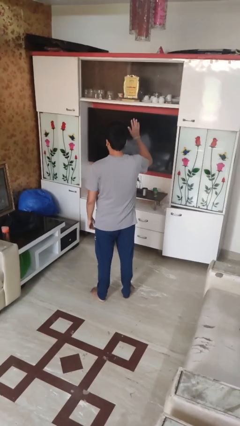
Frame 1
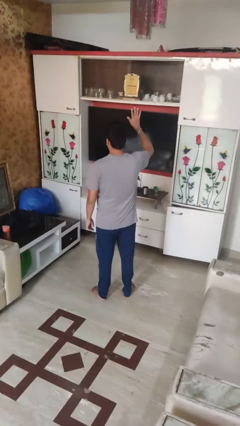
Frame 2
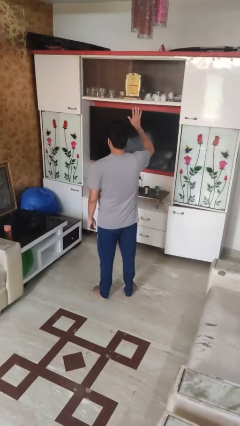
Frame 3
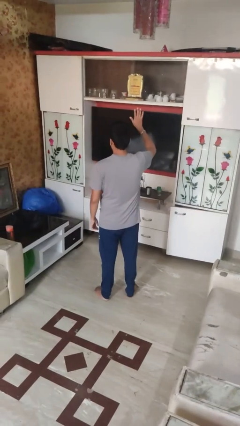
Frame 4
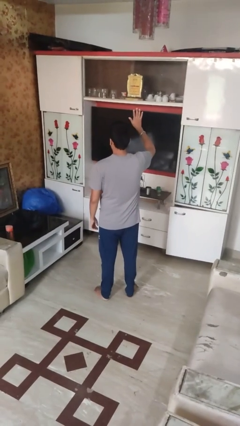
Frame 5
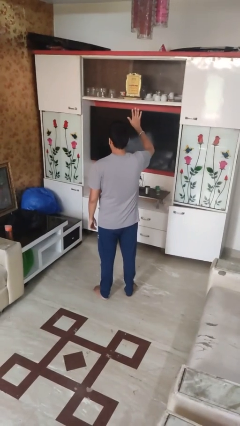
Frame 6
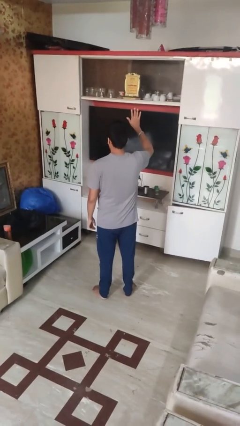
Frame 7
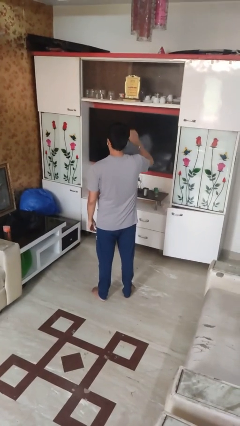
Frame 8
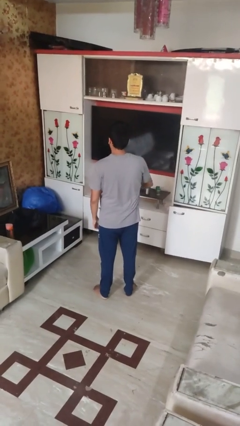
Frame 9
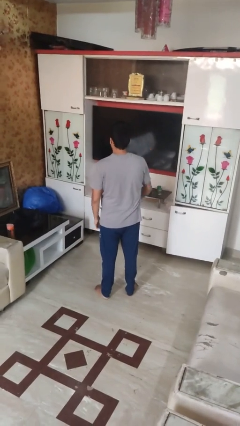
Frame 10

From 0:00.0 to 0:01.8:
person gestures number five

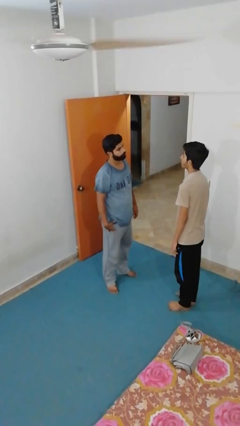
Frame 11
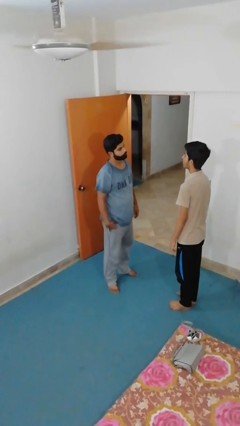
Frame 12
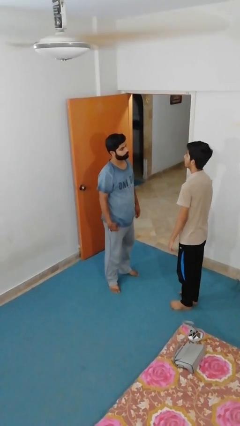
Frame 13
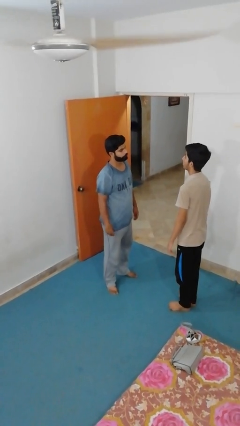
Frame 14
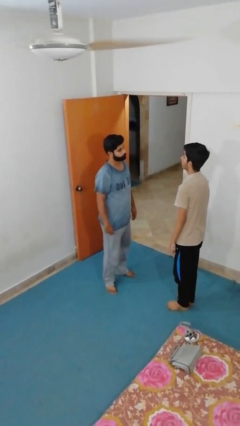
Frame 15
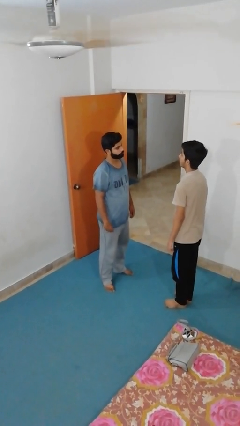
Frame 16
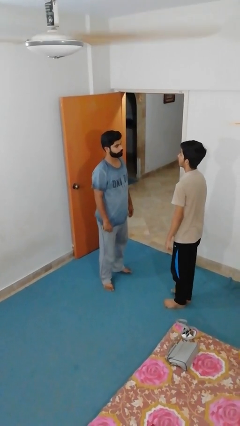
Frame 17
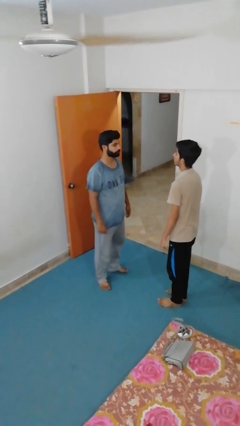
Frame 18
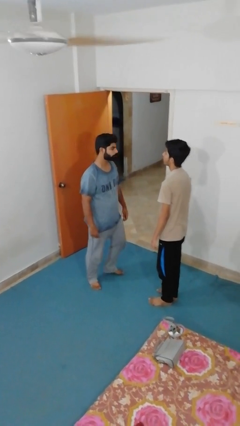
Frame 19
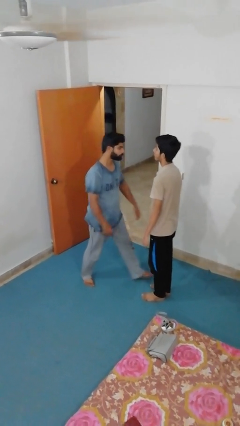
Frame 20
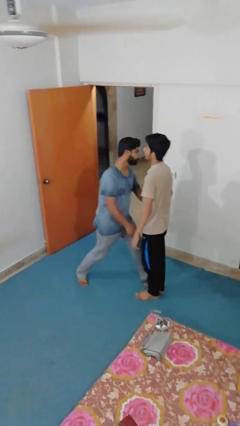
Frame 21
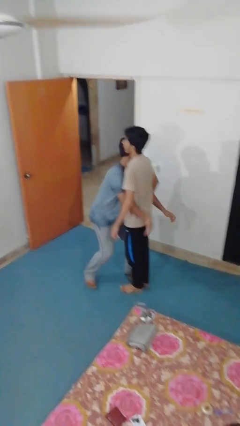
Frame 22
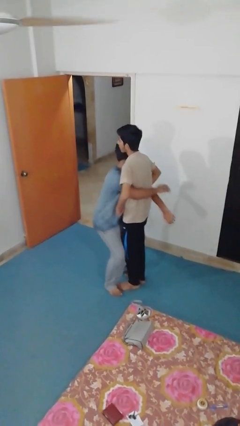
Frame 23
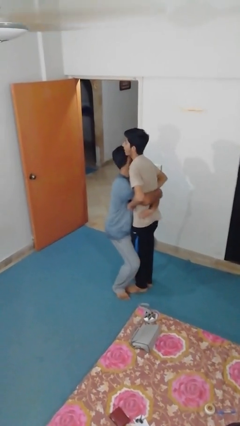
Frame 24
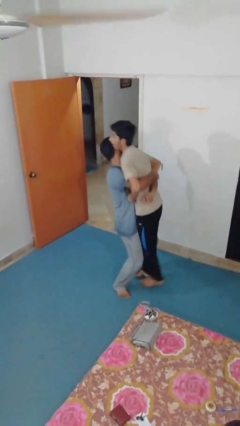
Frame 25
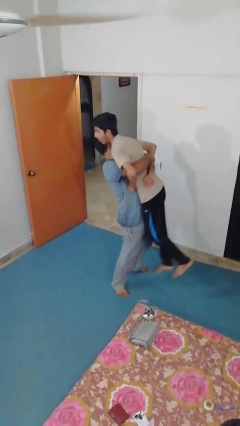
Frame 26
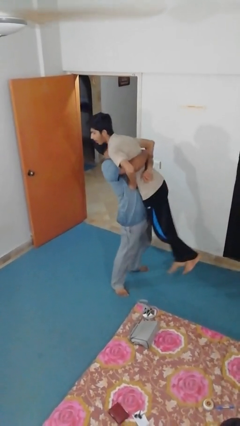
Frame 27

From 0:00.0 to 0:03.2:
person picks up person

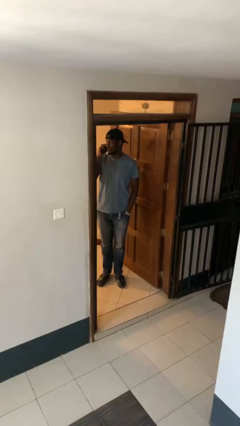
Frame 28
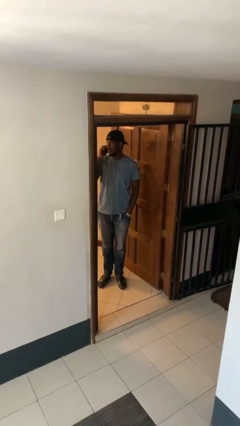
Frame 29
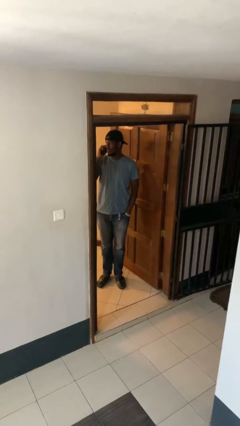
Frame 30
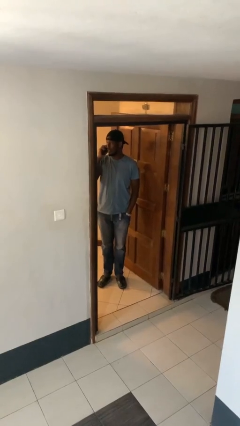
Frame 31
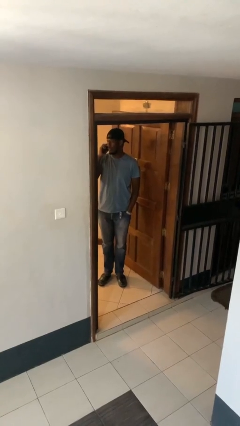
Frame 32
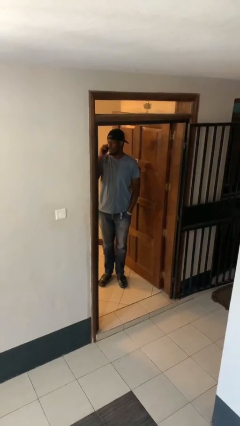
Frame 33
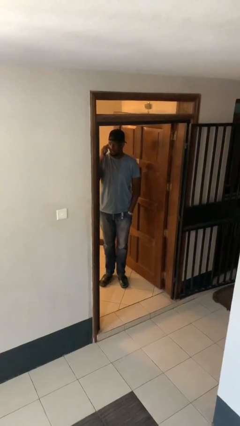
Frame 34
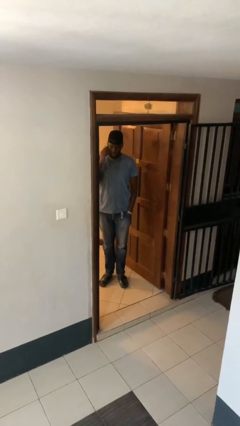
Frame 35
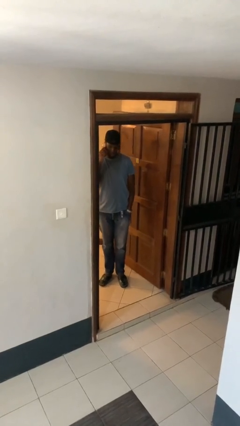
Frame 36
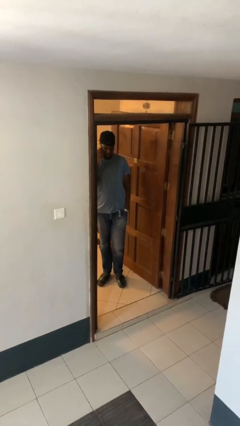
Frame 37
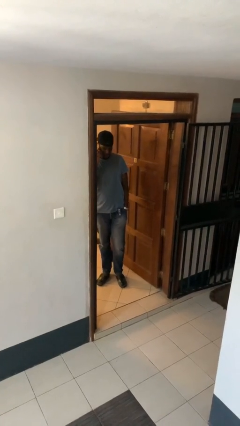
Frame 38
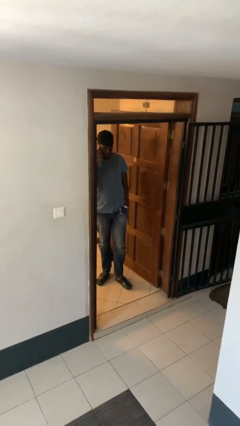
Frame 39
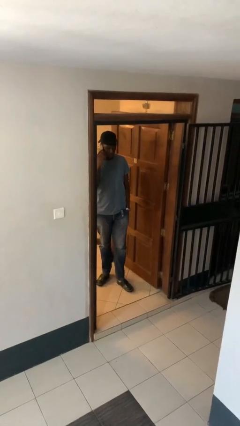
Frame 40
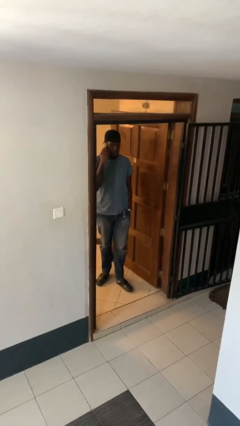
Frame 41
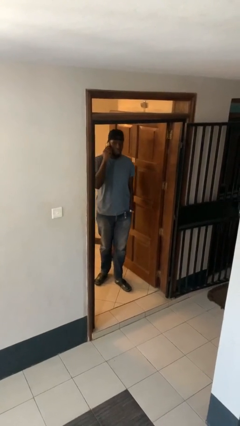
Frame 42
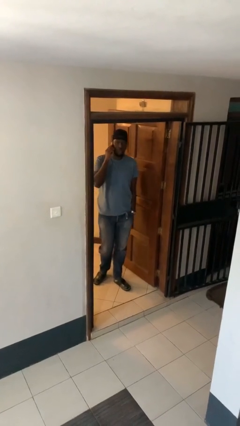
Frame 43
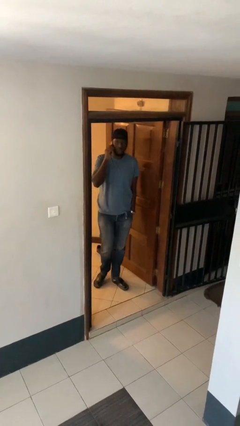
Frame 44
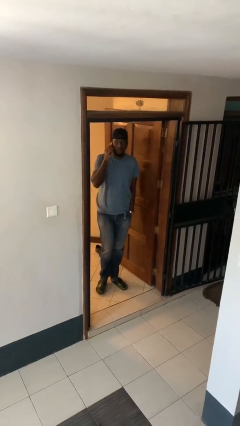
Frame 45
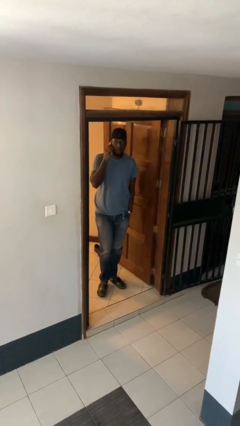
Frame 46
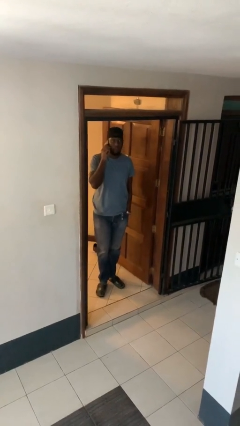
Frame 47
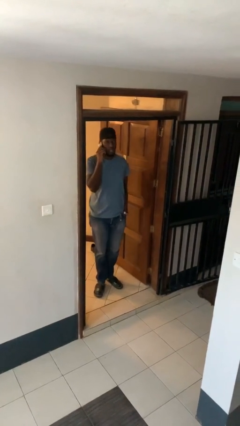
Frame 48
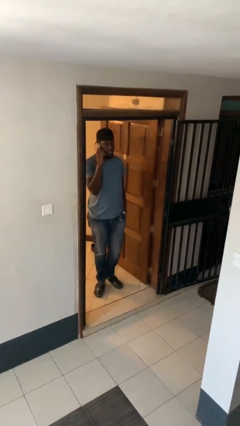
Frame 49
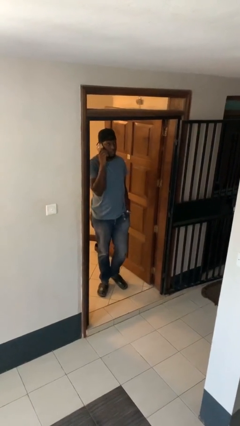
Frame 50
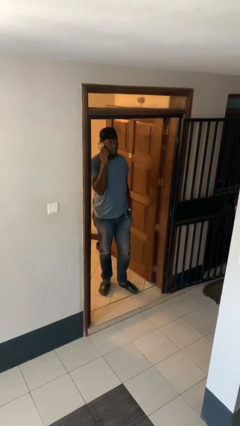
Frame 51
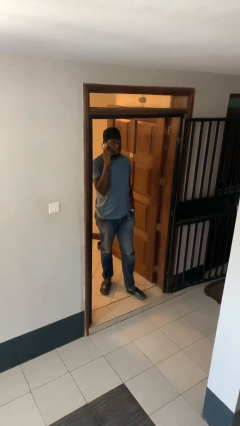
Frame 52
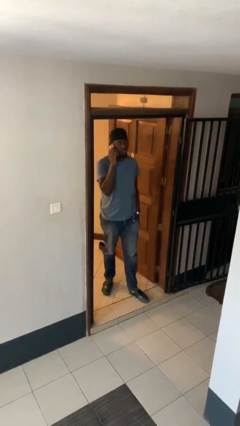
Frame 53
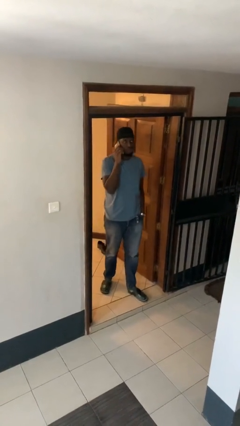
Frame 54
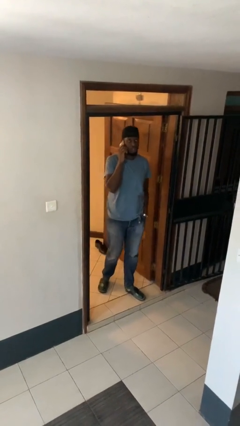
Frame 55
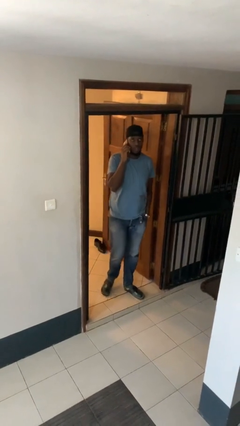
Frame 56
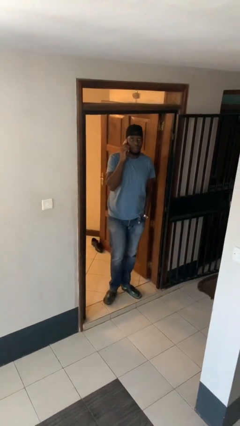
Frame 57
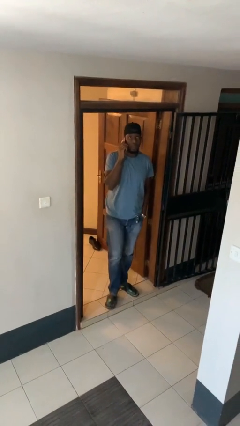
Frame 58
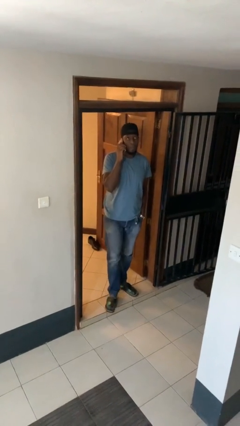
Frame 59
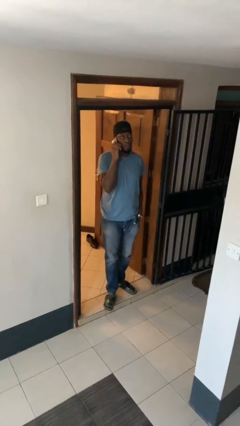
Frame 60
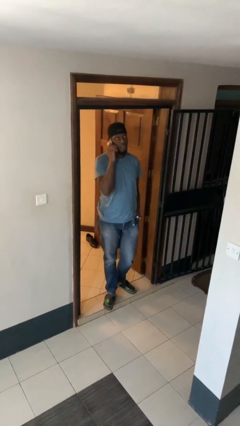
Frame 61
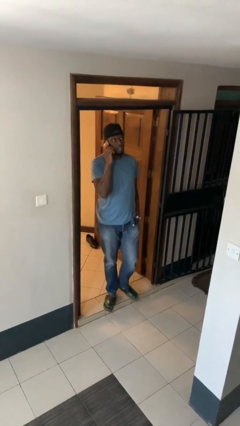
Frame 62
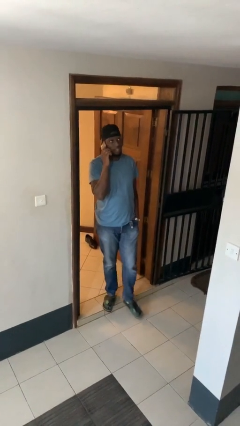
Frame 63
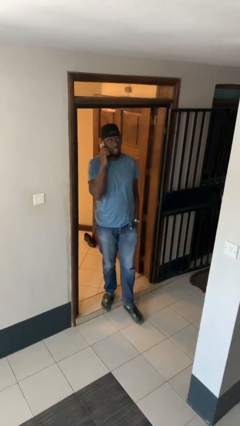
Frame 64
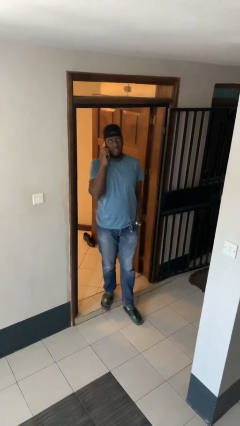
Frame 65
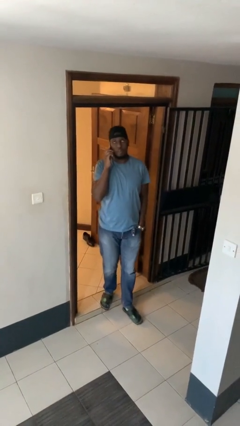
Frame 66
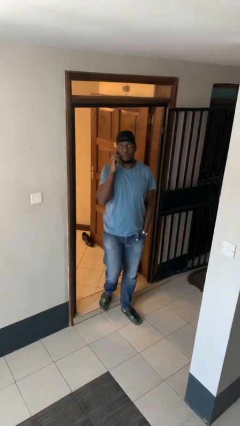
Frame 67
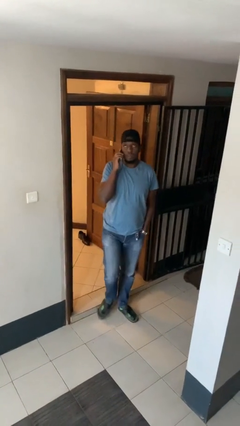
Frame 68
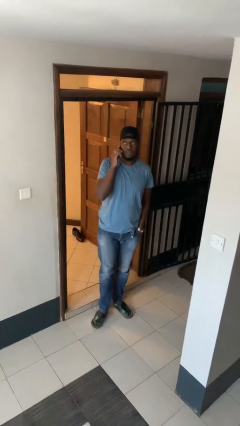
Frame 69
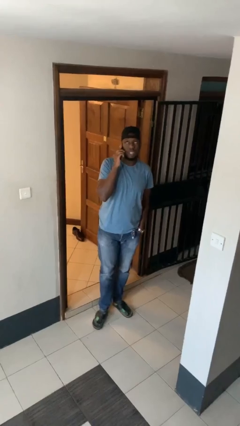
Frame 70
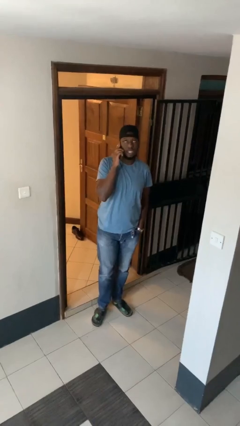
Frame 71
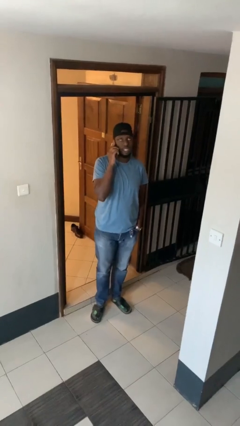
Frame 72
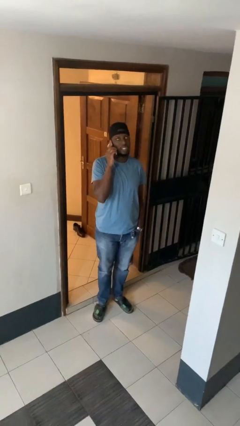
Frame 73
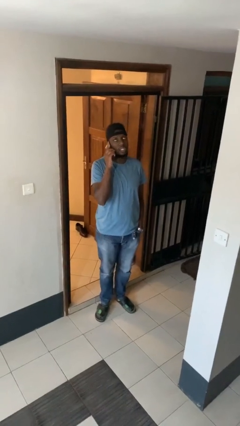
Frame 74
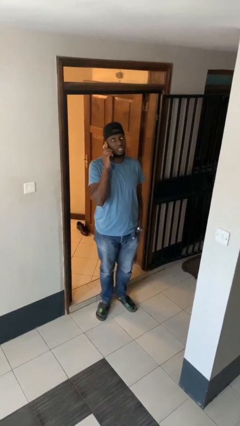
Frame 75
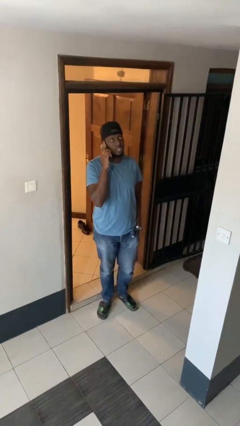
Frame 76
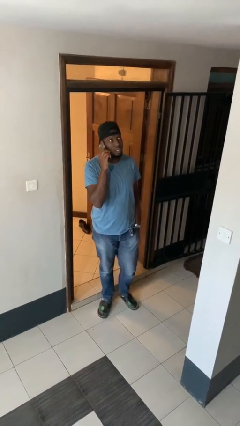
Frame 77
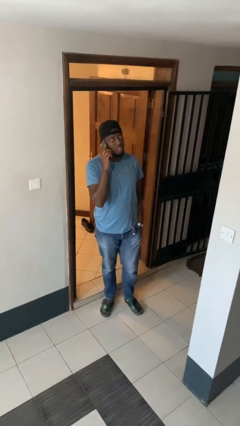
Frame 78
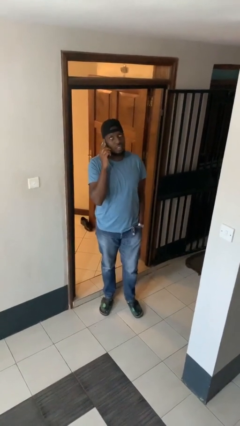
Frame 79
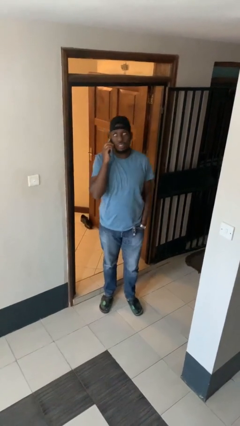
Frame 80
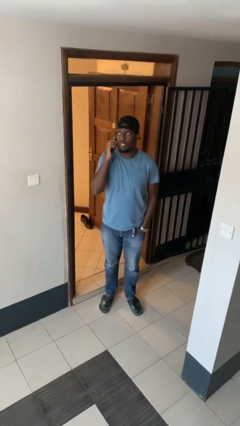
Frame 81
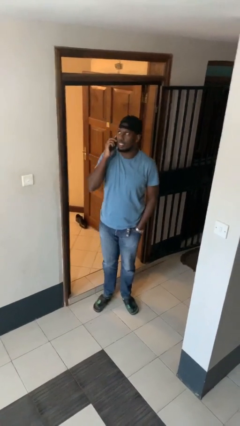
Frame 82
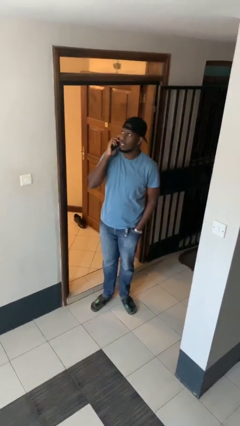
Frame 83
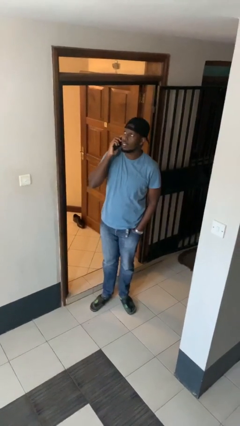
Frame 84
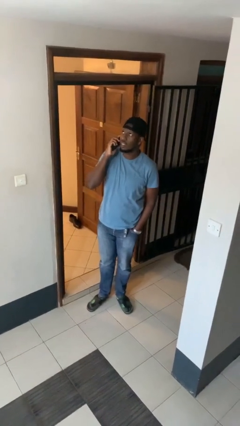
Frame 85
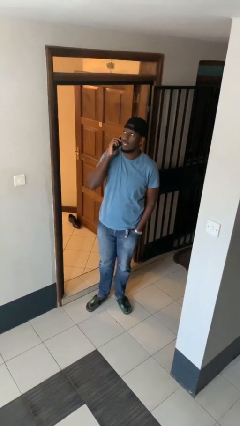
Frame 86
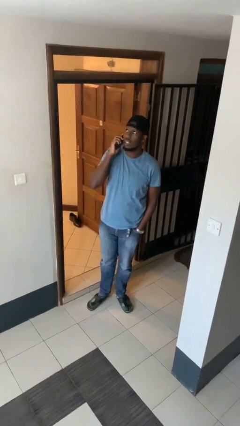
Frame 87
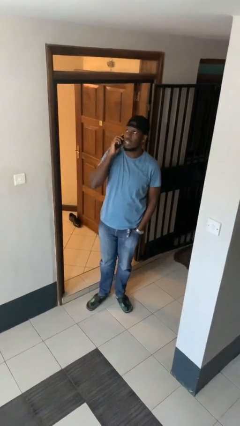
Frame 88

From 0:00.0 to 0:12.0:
person enters scene through structure

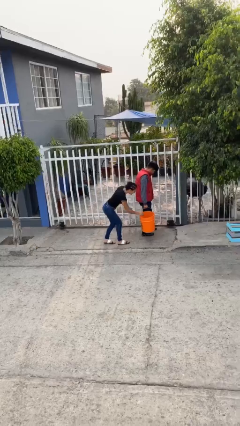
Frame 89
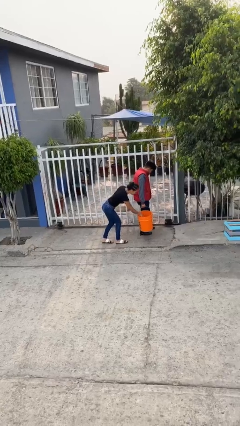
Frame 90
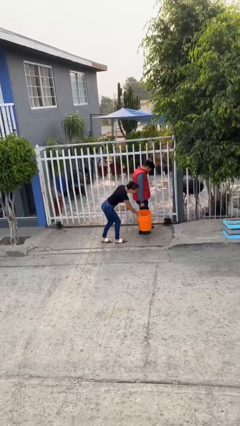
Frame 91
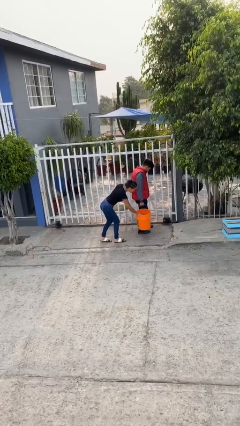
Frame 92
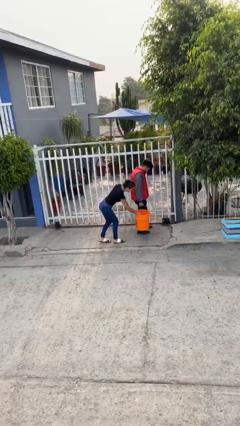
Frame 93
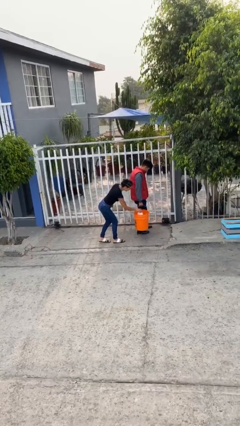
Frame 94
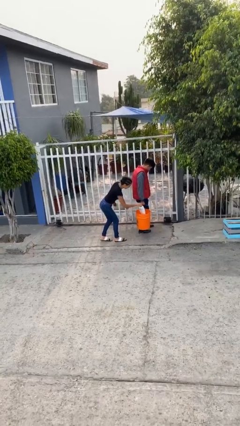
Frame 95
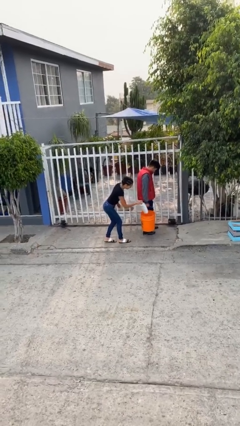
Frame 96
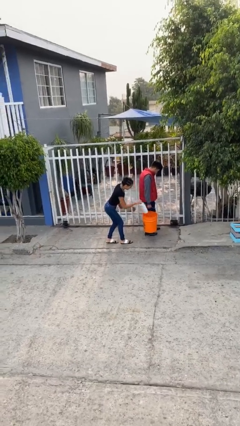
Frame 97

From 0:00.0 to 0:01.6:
person steals object from person
